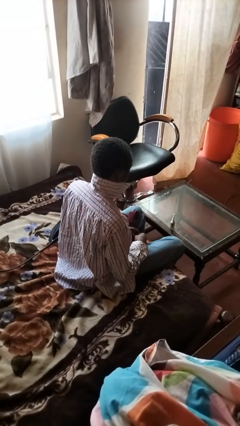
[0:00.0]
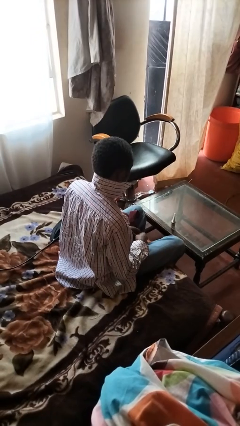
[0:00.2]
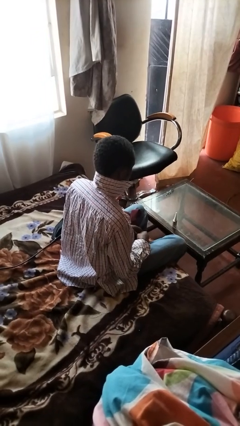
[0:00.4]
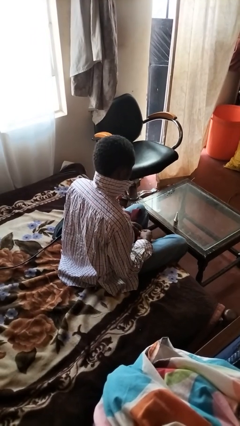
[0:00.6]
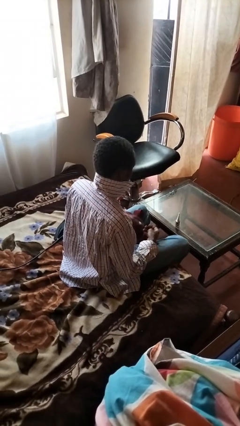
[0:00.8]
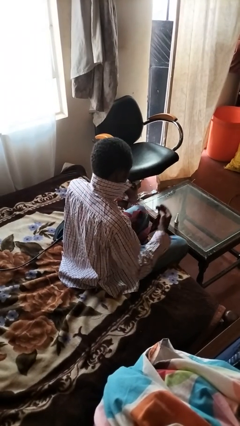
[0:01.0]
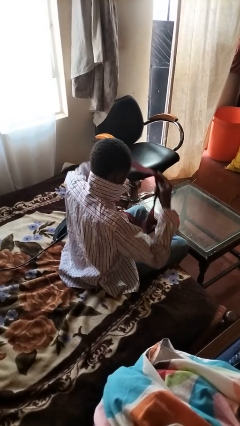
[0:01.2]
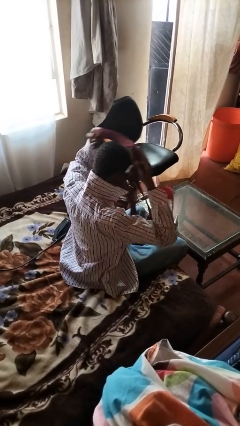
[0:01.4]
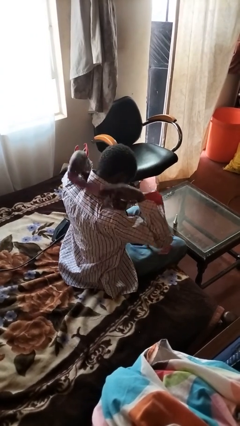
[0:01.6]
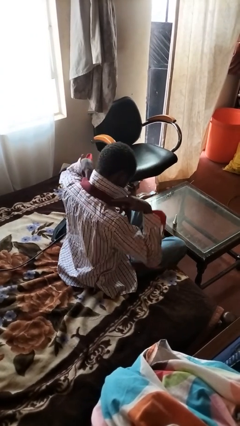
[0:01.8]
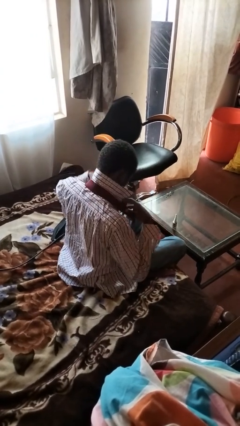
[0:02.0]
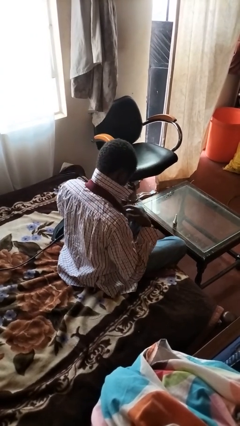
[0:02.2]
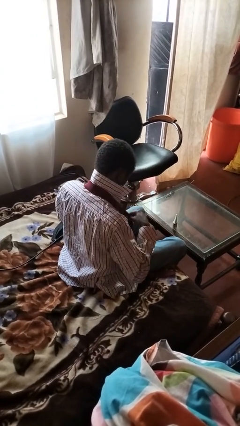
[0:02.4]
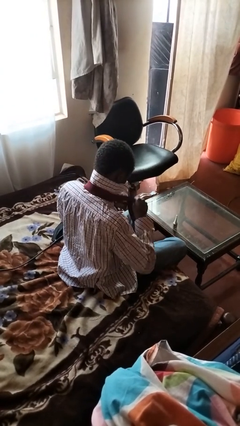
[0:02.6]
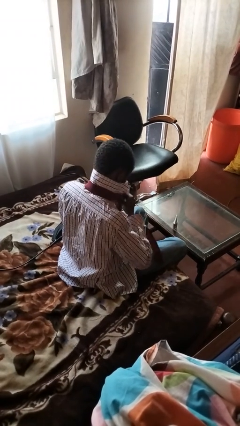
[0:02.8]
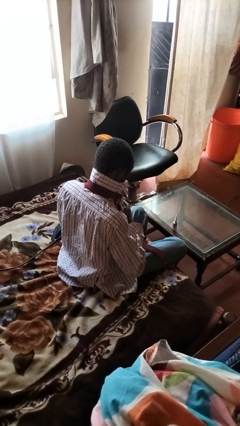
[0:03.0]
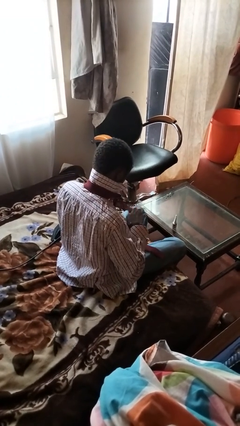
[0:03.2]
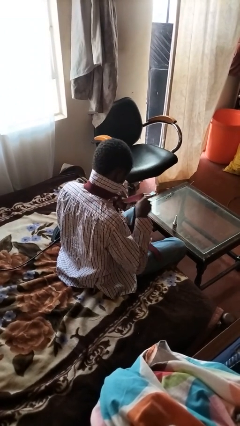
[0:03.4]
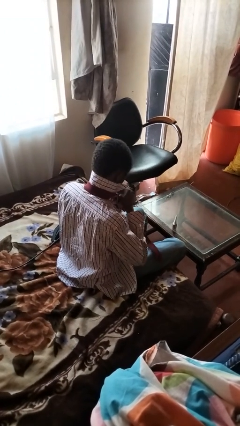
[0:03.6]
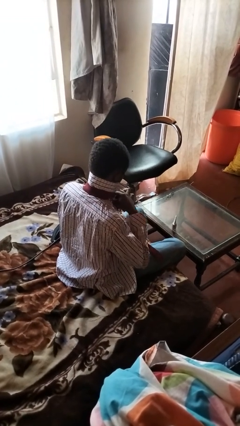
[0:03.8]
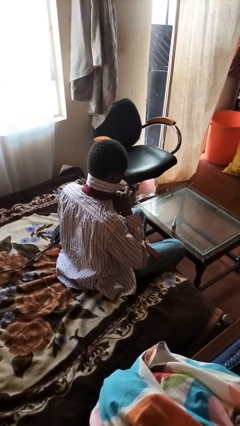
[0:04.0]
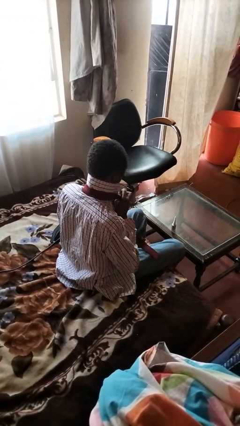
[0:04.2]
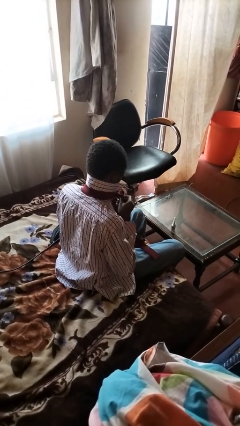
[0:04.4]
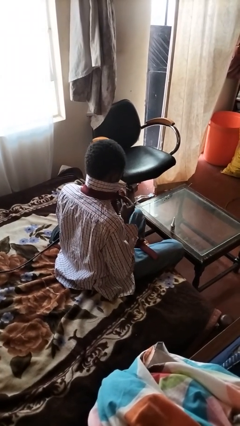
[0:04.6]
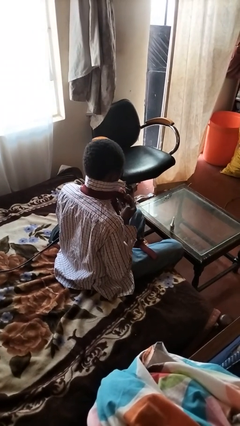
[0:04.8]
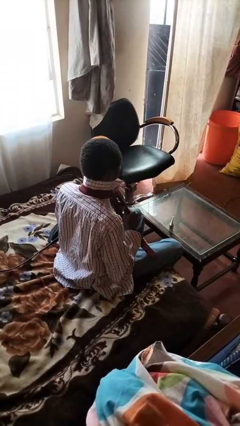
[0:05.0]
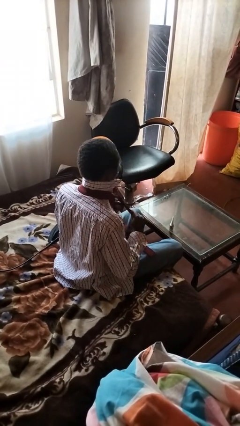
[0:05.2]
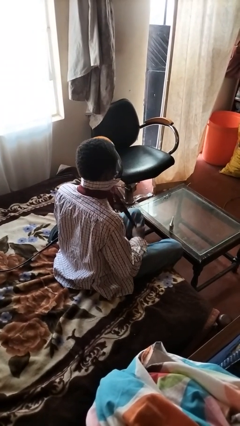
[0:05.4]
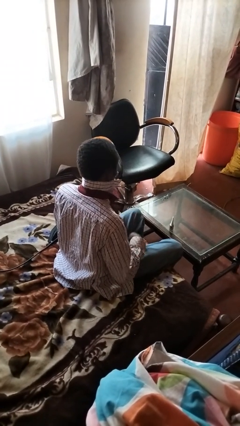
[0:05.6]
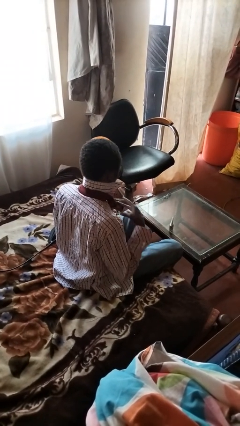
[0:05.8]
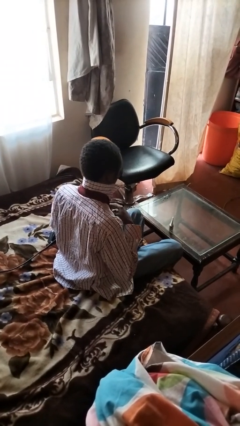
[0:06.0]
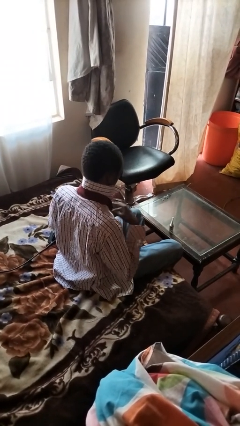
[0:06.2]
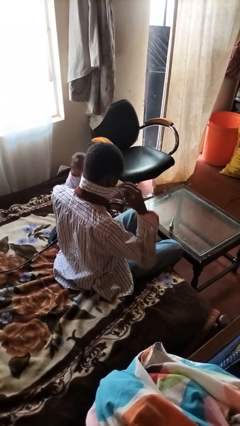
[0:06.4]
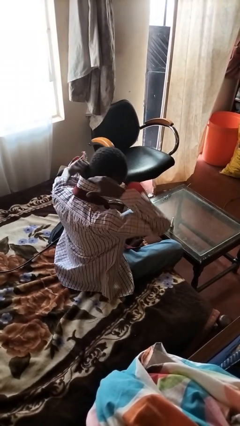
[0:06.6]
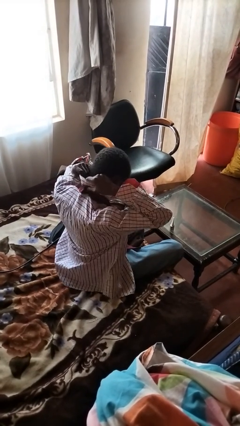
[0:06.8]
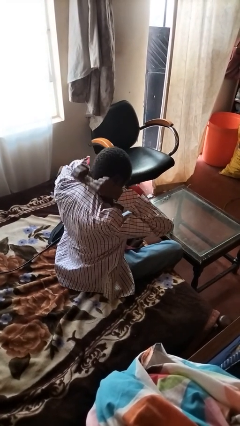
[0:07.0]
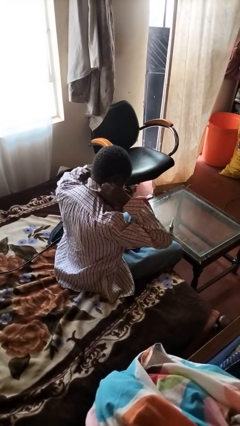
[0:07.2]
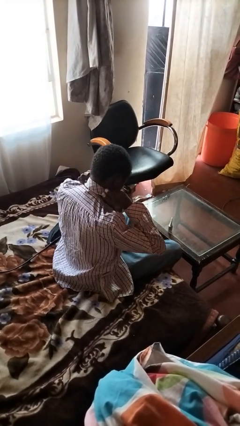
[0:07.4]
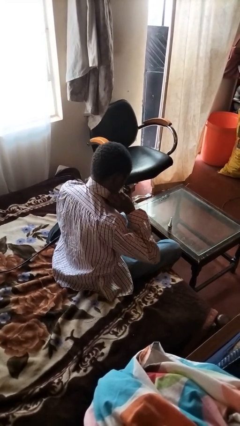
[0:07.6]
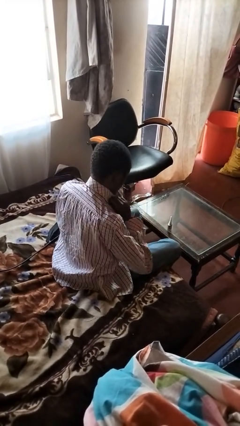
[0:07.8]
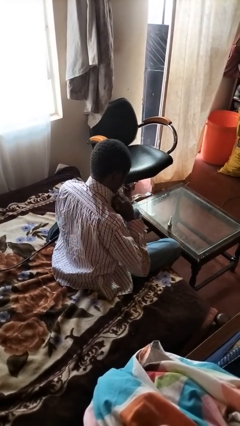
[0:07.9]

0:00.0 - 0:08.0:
person puts on necktie

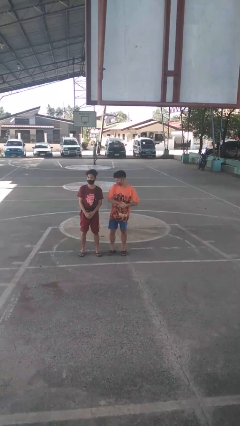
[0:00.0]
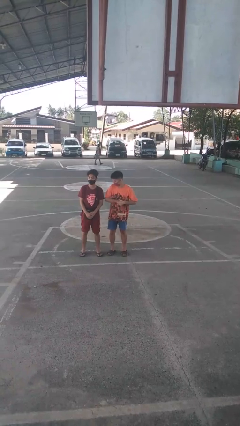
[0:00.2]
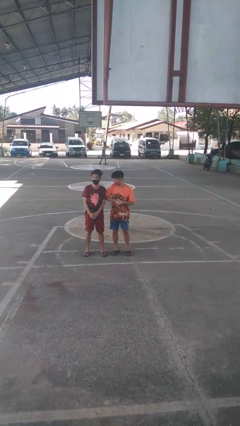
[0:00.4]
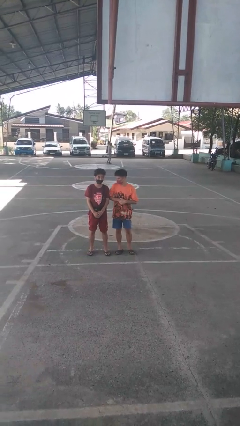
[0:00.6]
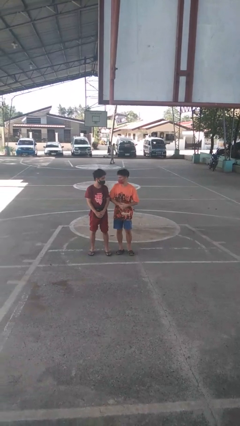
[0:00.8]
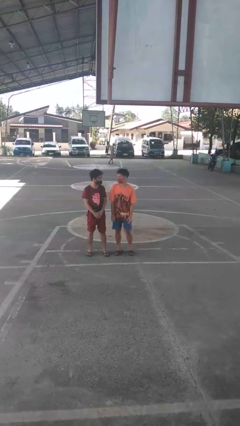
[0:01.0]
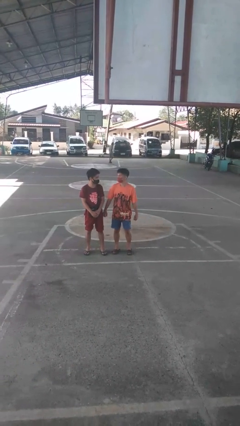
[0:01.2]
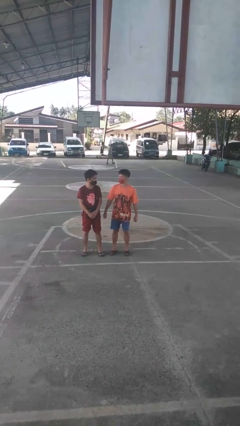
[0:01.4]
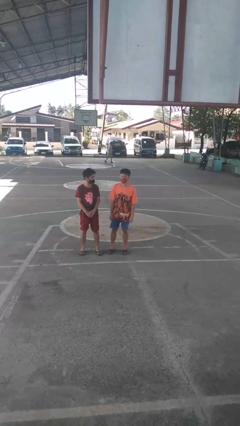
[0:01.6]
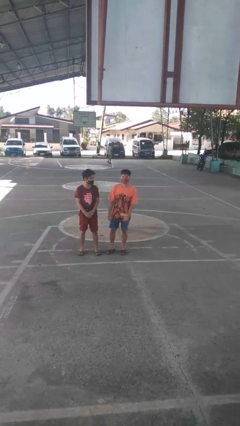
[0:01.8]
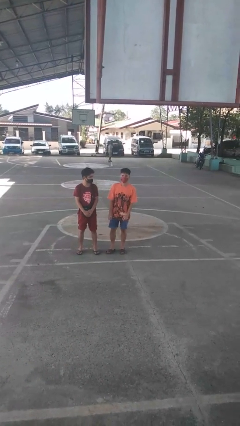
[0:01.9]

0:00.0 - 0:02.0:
person nudges person with elbow

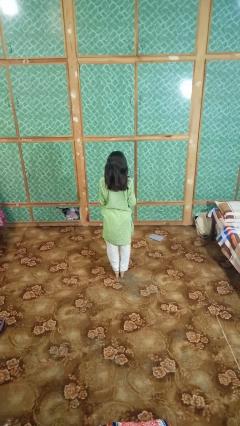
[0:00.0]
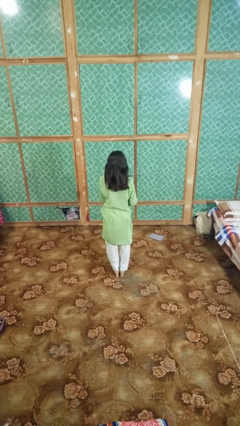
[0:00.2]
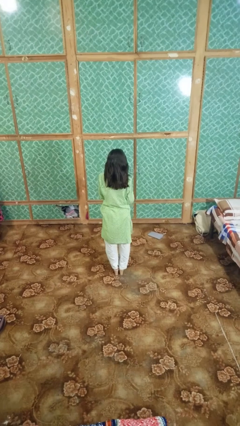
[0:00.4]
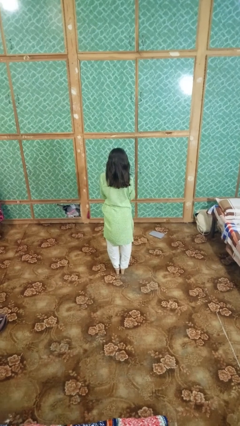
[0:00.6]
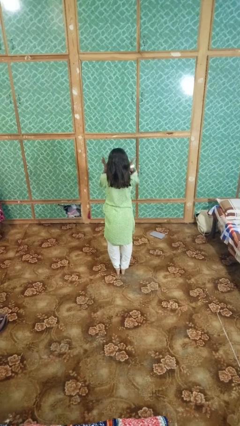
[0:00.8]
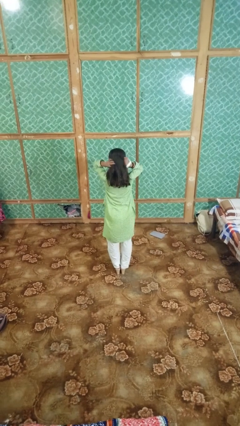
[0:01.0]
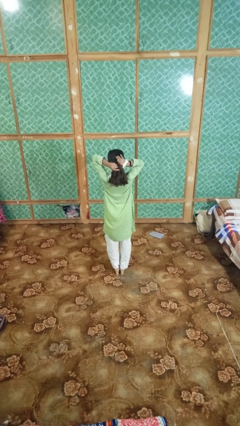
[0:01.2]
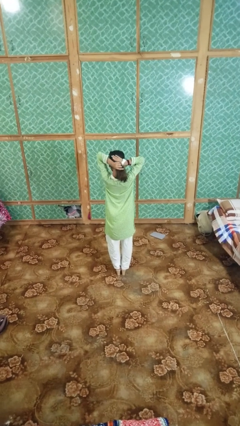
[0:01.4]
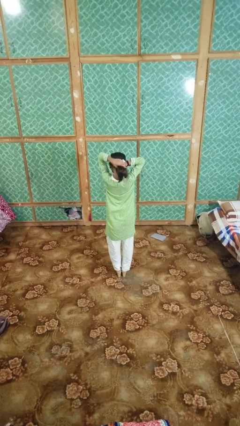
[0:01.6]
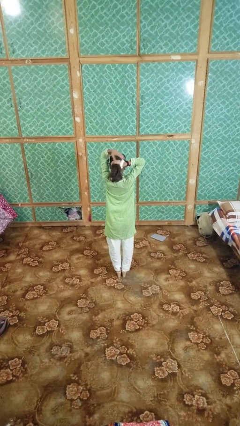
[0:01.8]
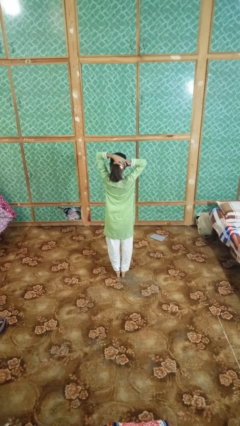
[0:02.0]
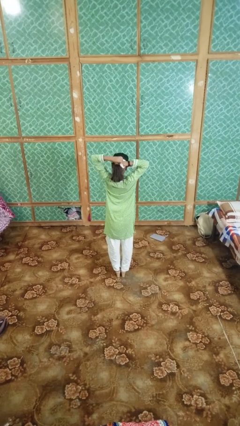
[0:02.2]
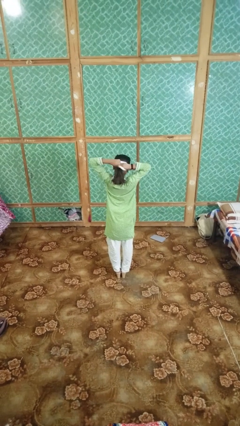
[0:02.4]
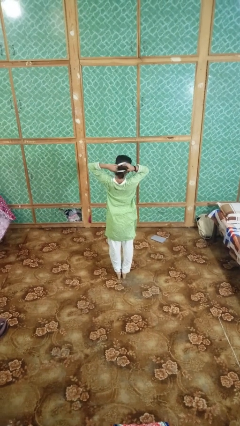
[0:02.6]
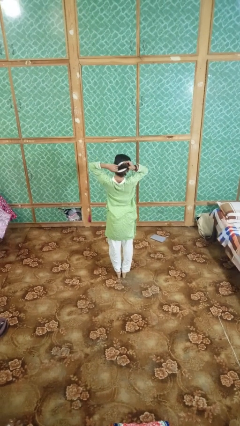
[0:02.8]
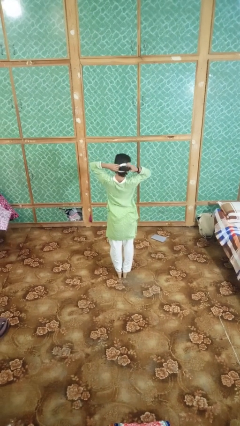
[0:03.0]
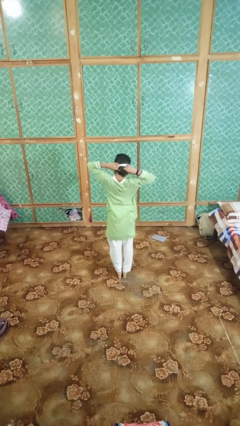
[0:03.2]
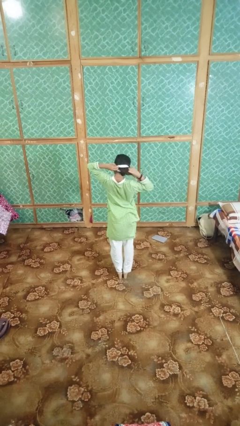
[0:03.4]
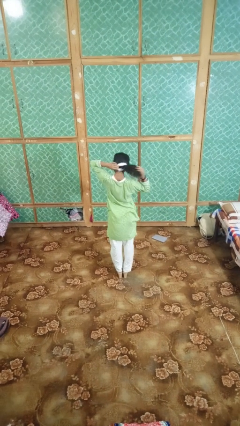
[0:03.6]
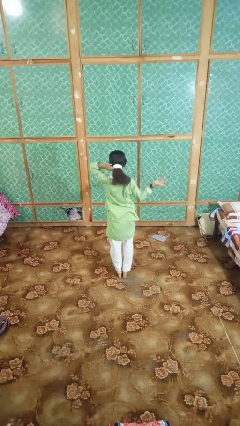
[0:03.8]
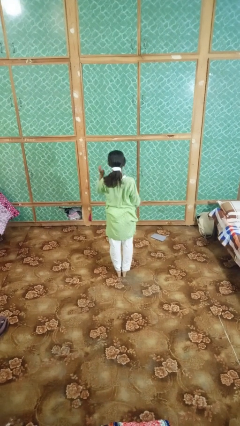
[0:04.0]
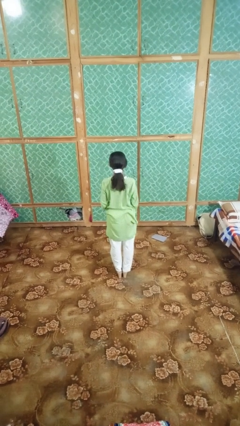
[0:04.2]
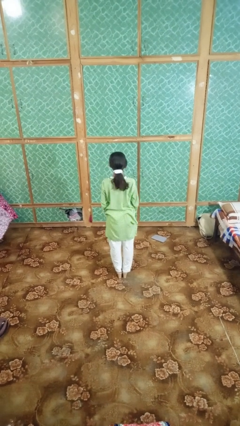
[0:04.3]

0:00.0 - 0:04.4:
person puts hair in ponytail

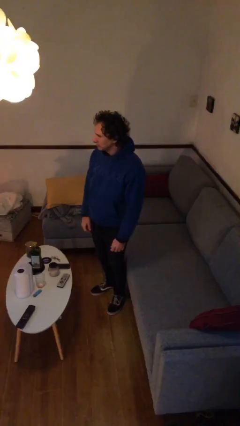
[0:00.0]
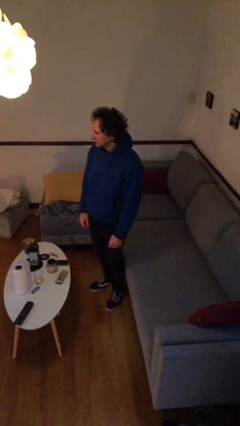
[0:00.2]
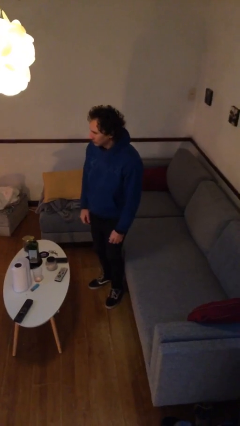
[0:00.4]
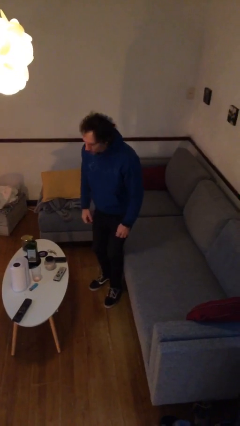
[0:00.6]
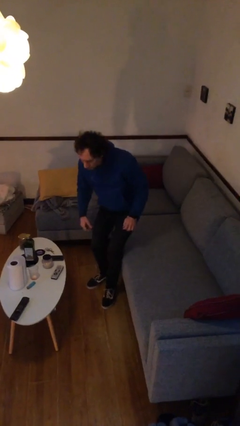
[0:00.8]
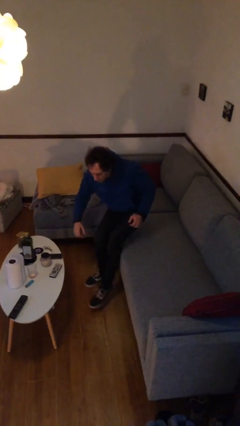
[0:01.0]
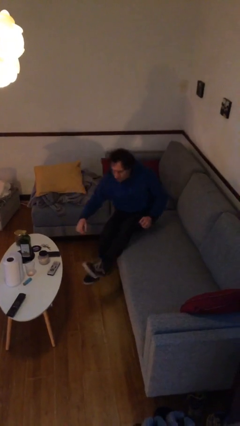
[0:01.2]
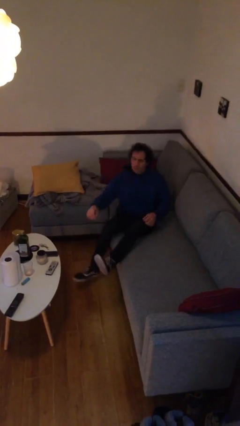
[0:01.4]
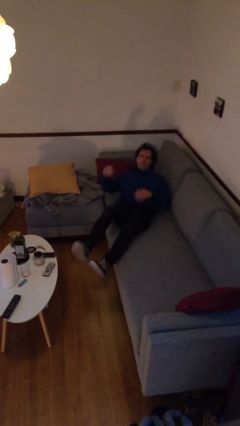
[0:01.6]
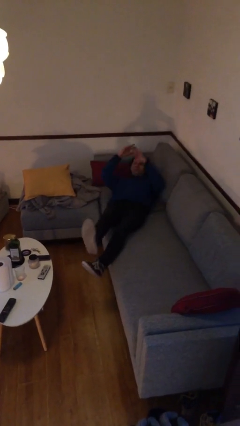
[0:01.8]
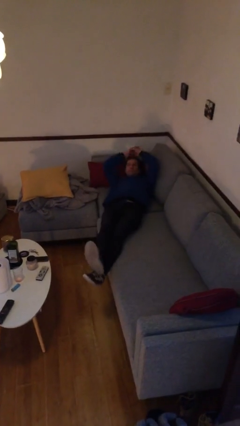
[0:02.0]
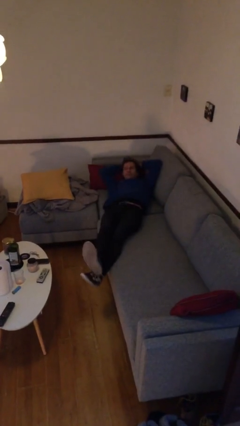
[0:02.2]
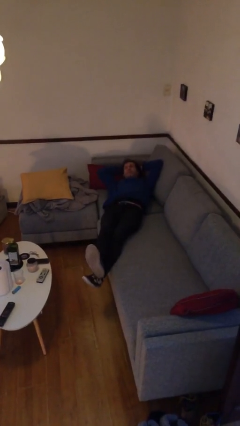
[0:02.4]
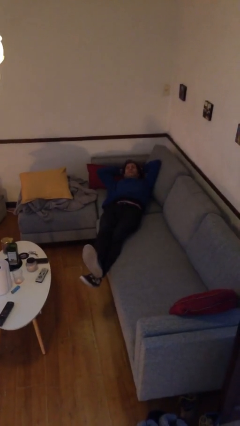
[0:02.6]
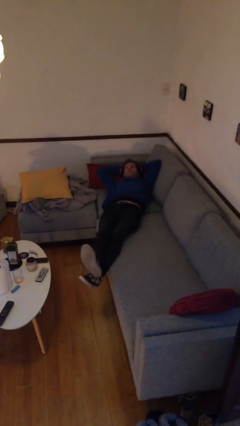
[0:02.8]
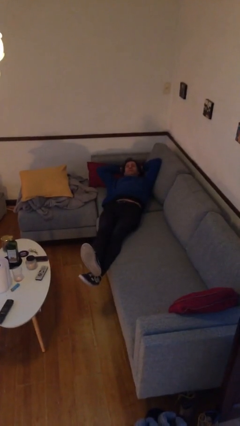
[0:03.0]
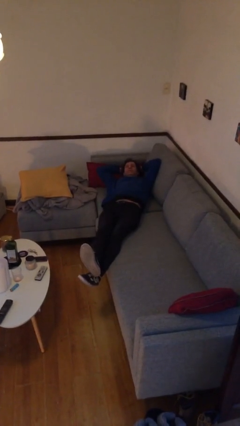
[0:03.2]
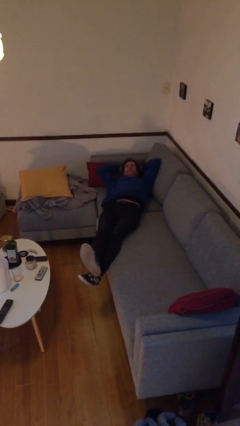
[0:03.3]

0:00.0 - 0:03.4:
person lies down on couch
